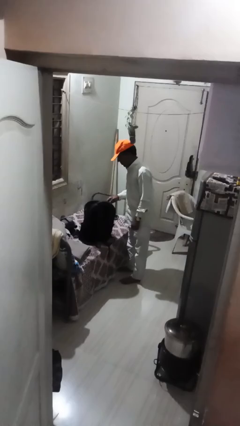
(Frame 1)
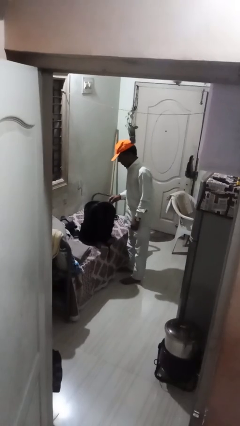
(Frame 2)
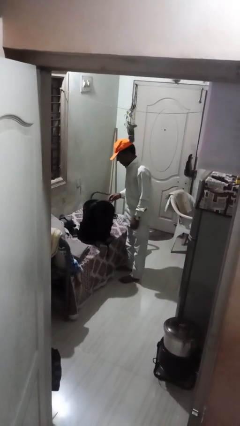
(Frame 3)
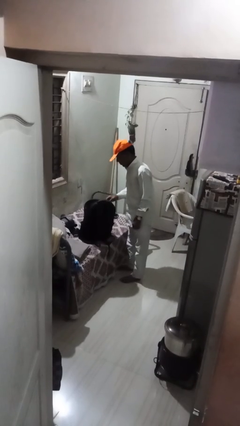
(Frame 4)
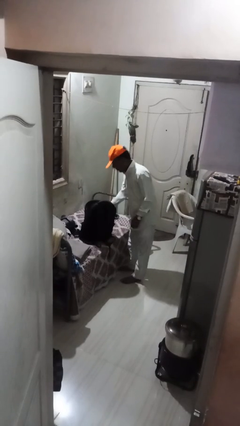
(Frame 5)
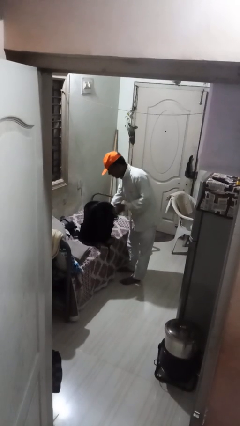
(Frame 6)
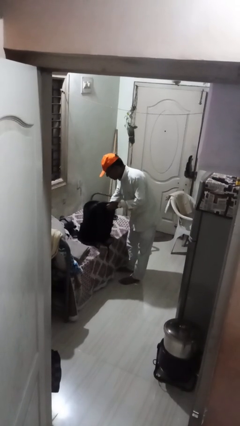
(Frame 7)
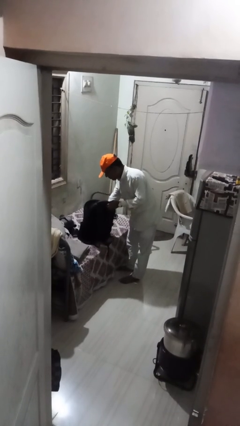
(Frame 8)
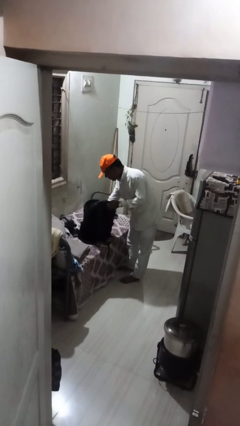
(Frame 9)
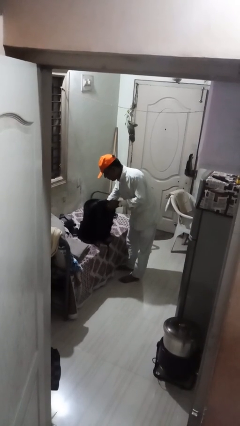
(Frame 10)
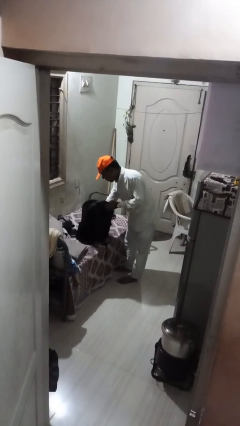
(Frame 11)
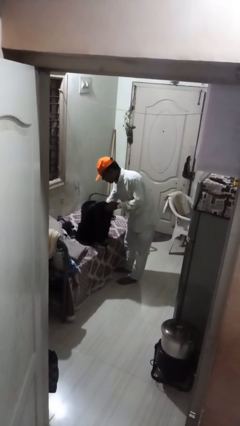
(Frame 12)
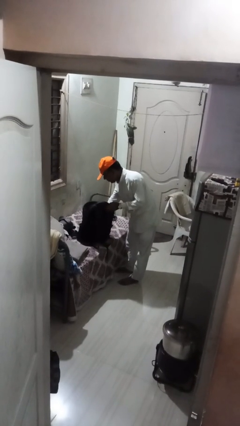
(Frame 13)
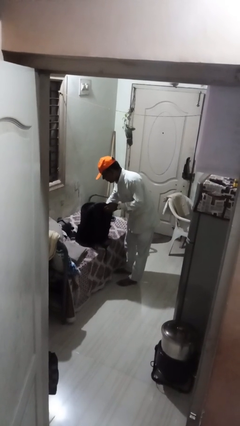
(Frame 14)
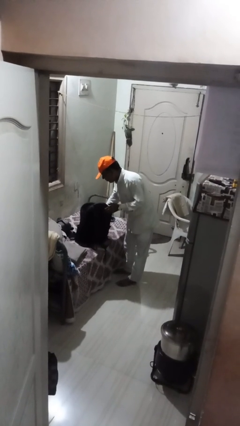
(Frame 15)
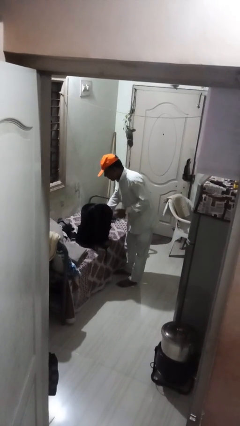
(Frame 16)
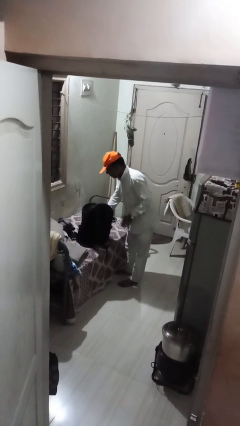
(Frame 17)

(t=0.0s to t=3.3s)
person searches in backpack

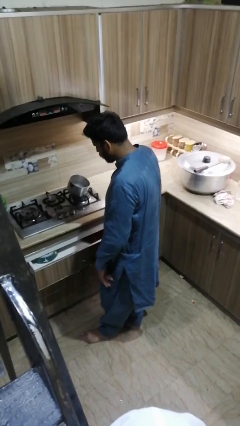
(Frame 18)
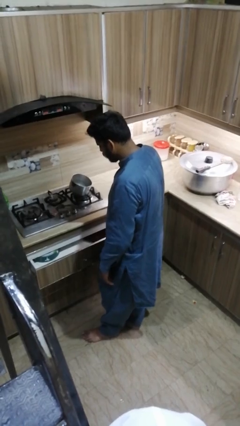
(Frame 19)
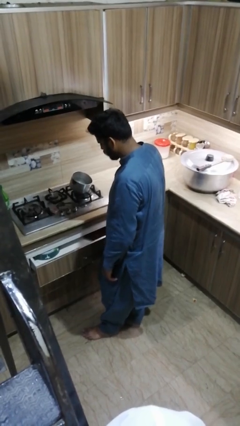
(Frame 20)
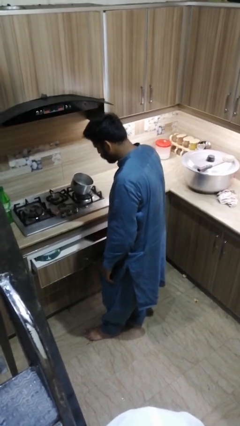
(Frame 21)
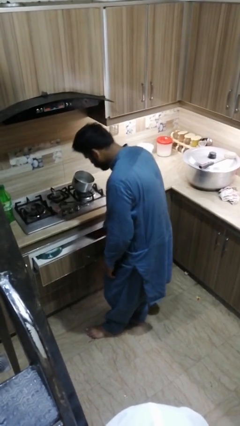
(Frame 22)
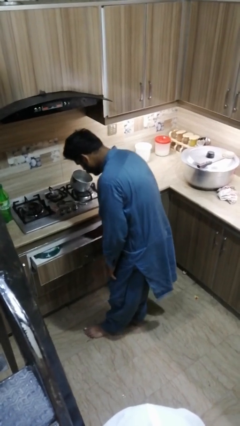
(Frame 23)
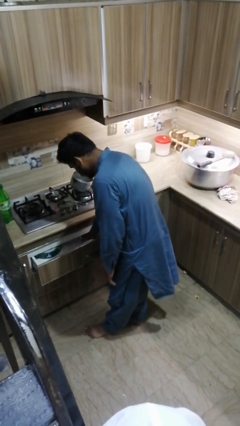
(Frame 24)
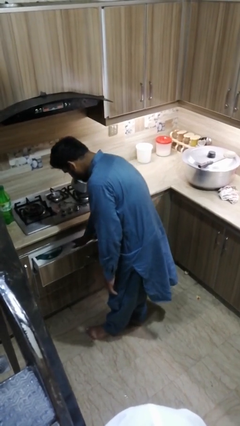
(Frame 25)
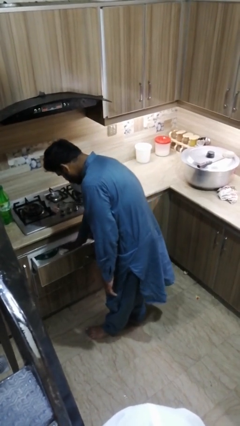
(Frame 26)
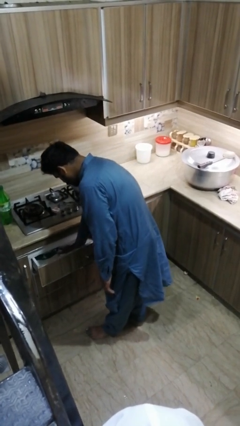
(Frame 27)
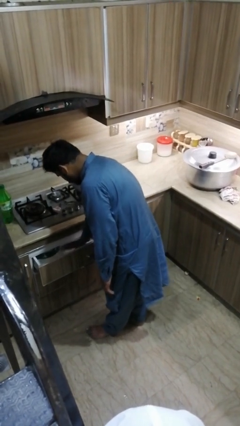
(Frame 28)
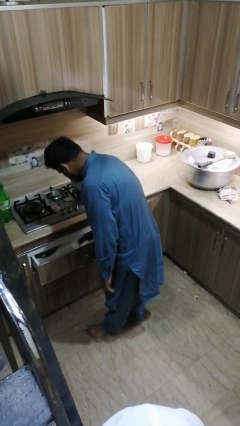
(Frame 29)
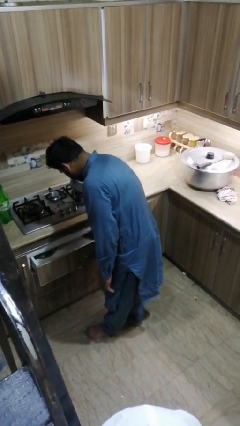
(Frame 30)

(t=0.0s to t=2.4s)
person searches in kitchen drawer

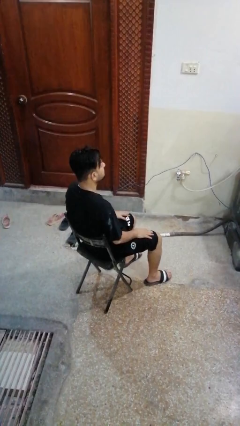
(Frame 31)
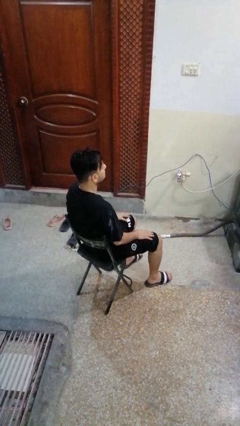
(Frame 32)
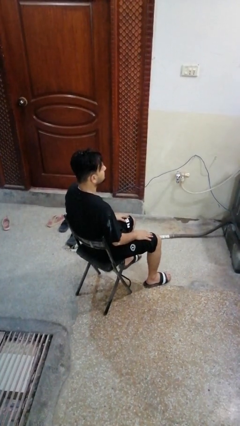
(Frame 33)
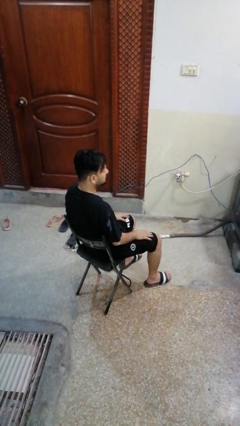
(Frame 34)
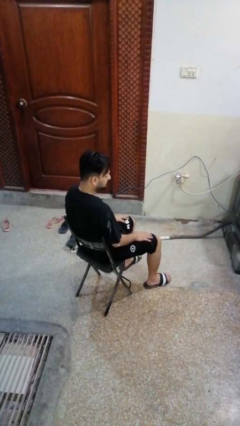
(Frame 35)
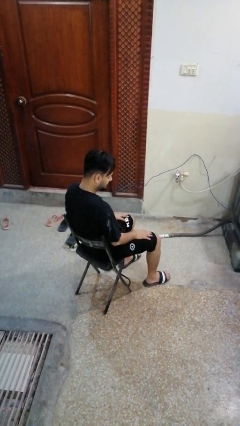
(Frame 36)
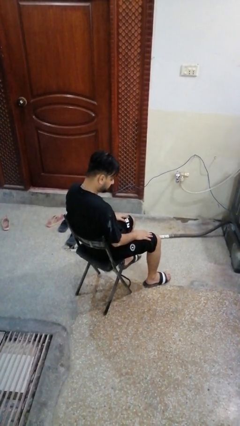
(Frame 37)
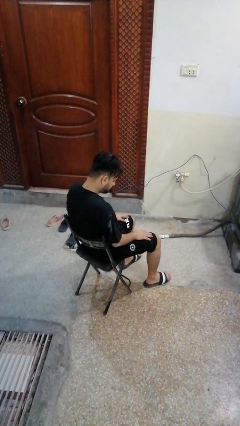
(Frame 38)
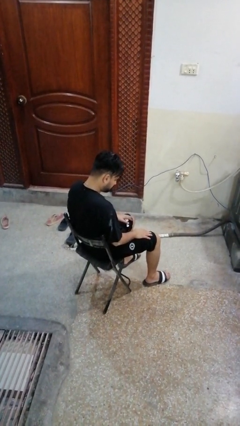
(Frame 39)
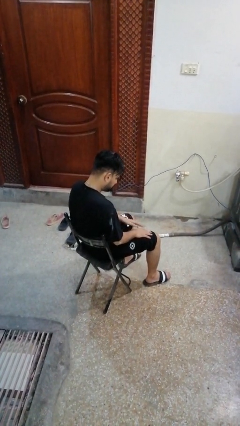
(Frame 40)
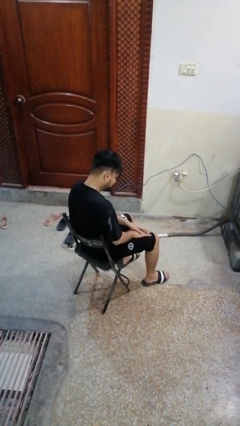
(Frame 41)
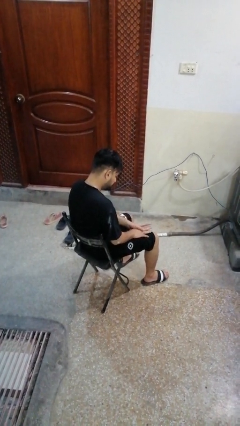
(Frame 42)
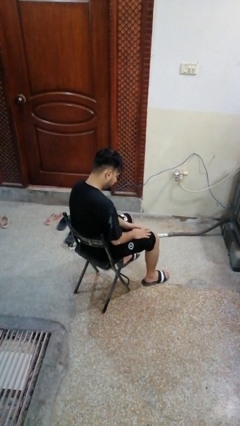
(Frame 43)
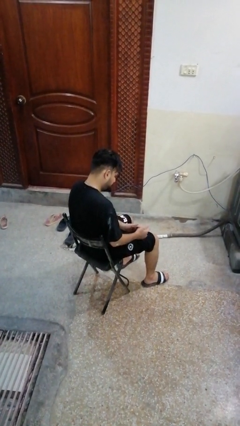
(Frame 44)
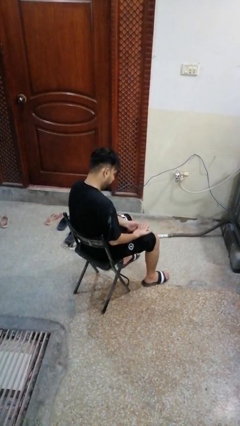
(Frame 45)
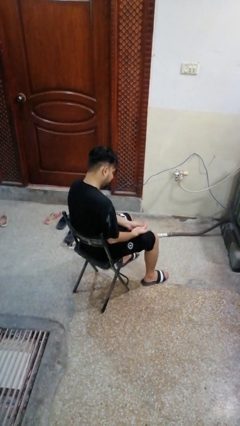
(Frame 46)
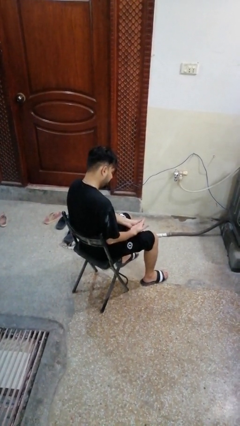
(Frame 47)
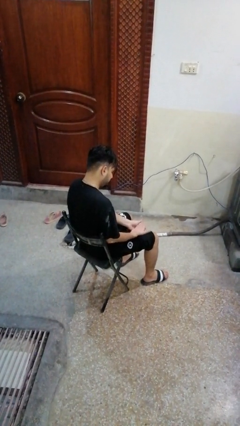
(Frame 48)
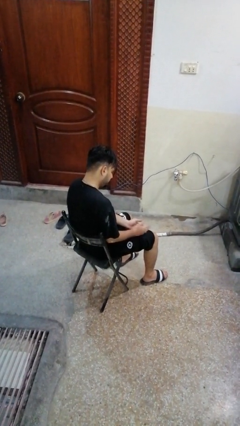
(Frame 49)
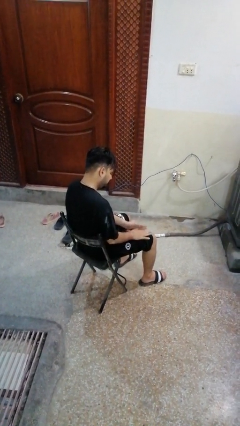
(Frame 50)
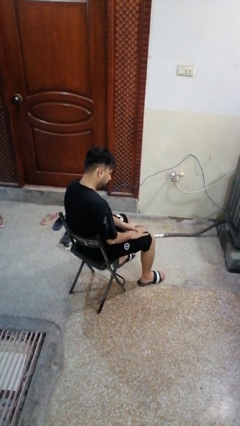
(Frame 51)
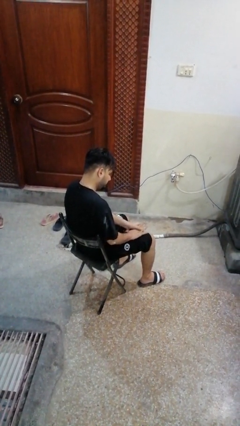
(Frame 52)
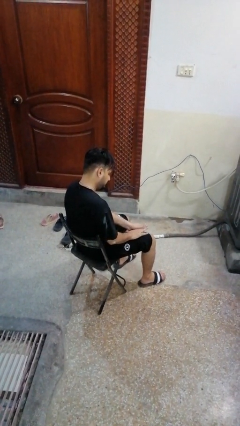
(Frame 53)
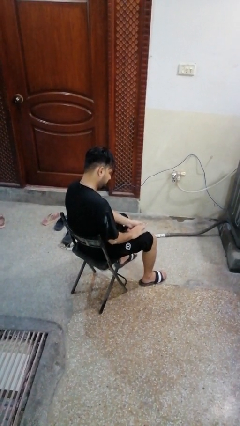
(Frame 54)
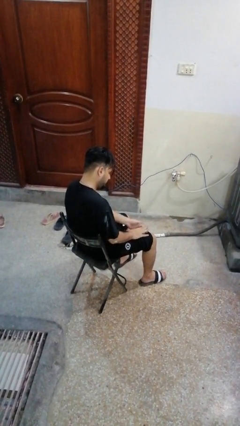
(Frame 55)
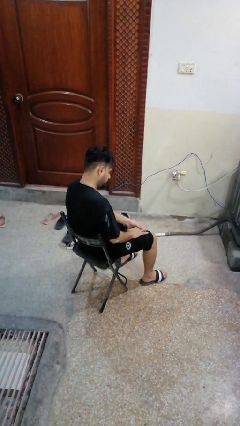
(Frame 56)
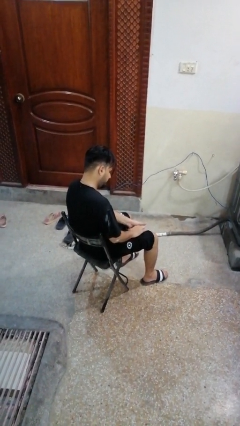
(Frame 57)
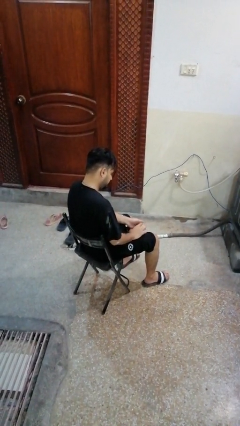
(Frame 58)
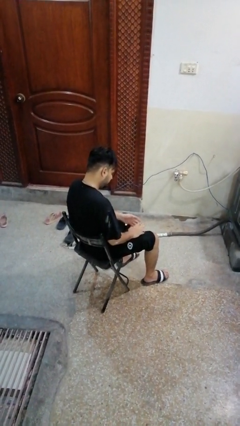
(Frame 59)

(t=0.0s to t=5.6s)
person looks at hands in lap

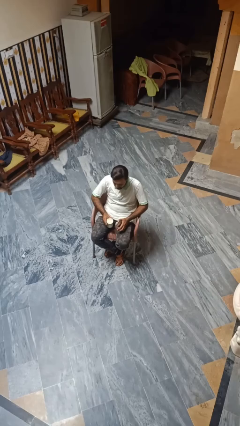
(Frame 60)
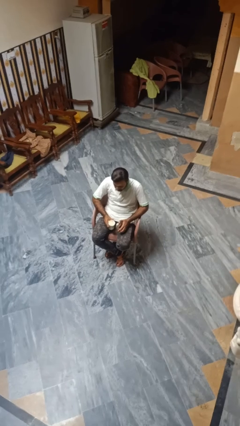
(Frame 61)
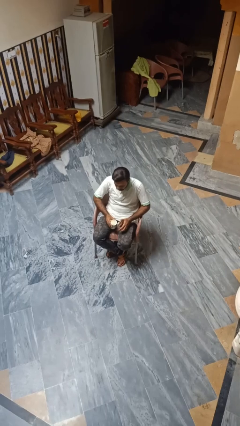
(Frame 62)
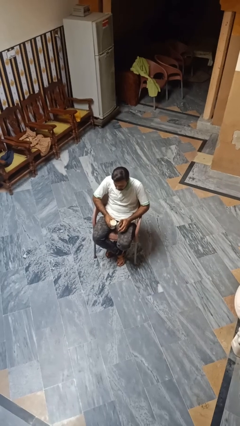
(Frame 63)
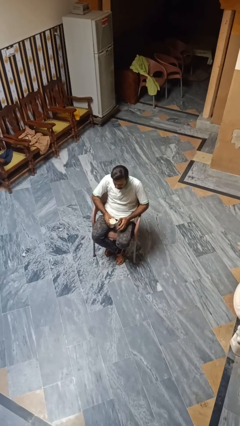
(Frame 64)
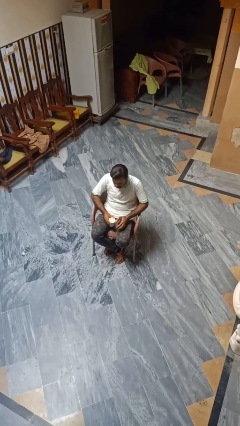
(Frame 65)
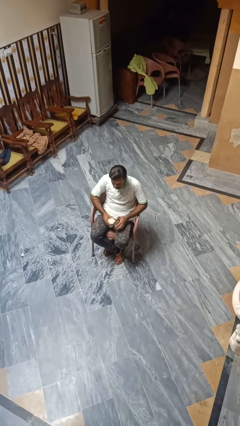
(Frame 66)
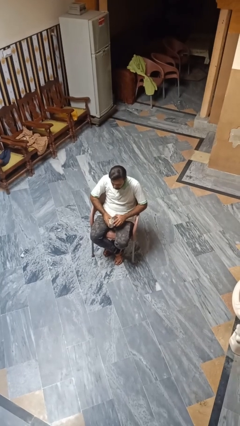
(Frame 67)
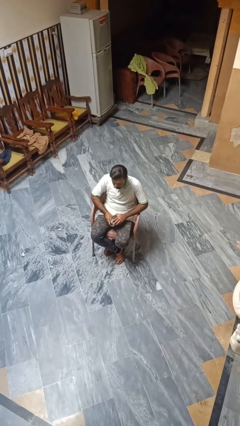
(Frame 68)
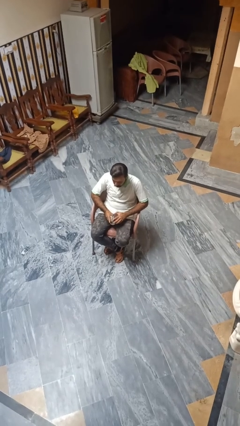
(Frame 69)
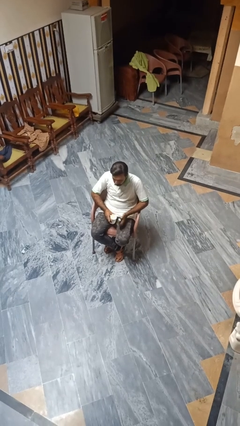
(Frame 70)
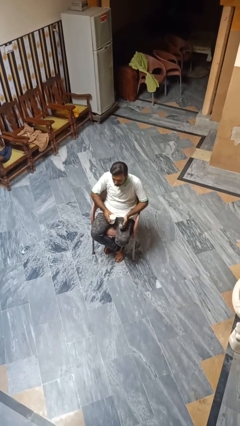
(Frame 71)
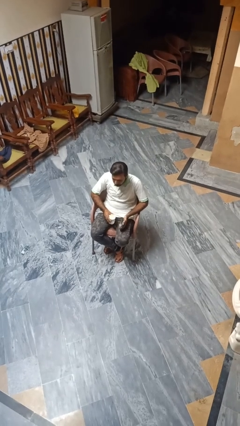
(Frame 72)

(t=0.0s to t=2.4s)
person opens beverage can

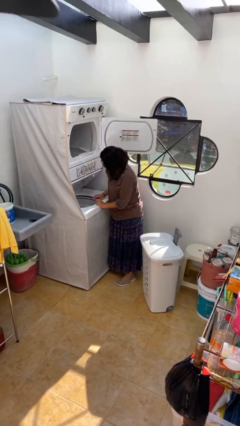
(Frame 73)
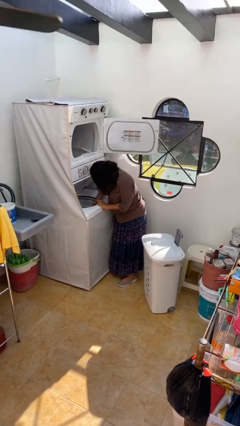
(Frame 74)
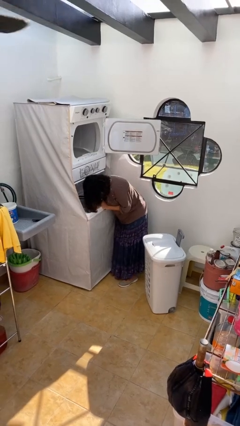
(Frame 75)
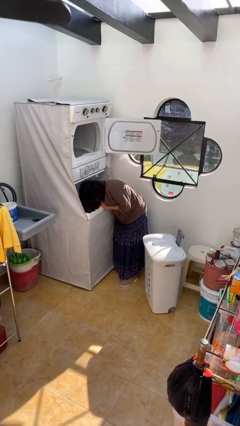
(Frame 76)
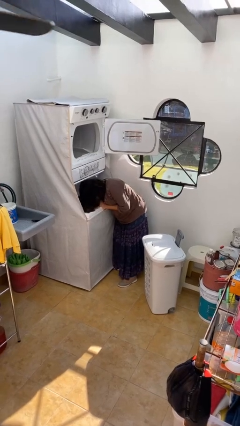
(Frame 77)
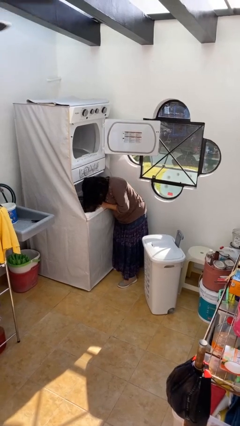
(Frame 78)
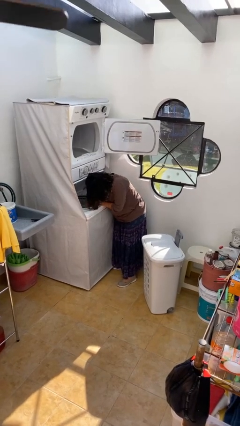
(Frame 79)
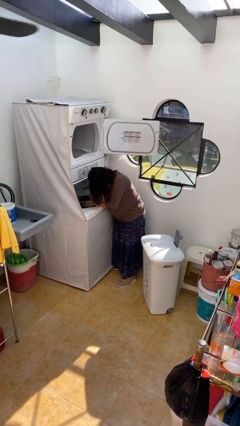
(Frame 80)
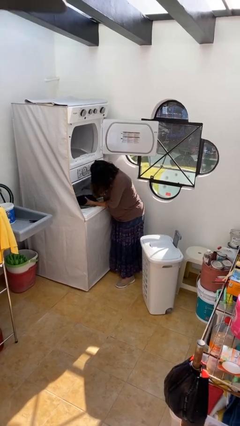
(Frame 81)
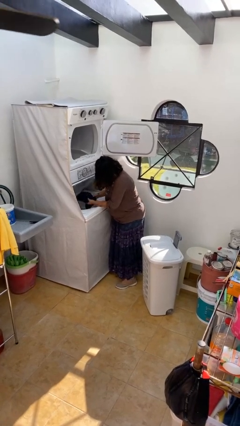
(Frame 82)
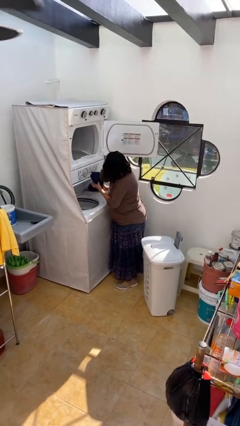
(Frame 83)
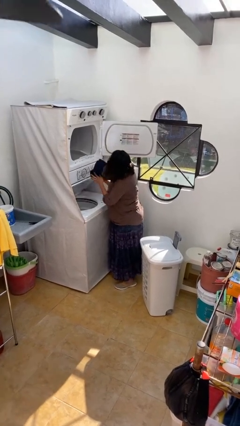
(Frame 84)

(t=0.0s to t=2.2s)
person unloads clotheswasher

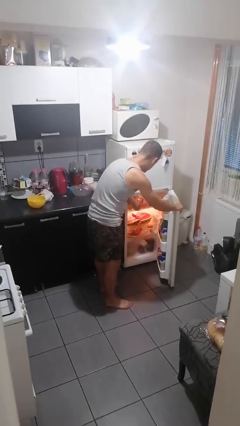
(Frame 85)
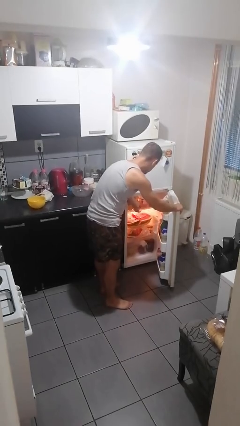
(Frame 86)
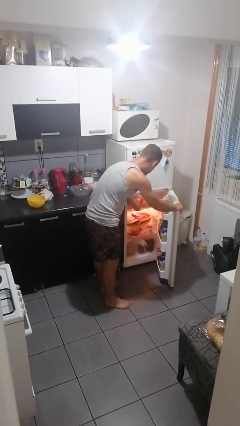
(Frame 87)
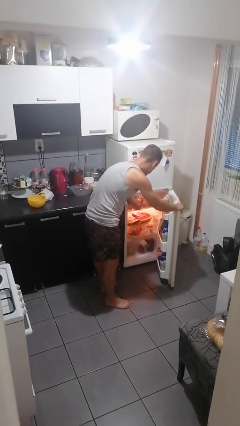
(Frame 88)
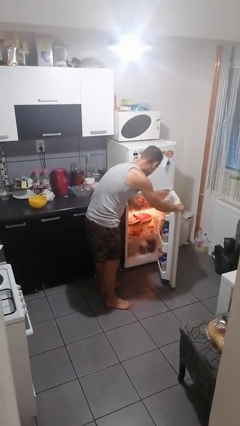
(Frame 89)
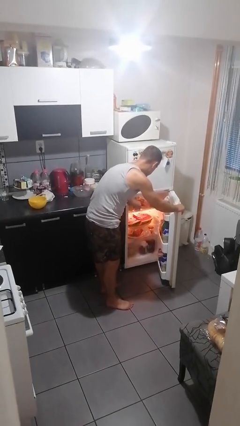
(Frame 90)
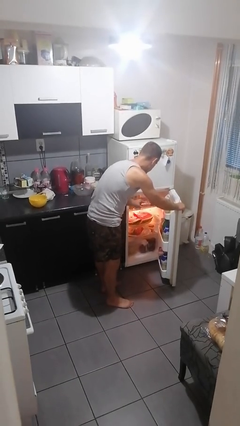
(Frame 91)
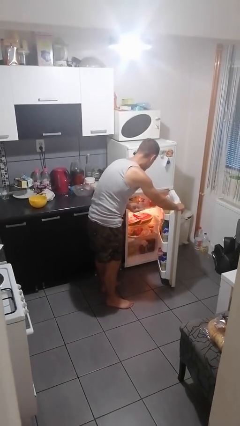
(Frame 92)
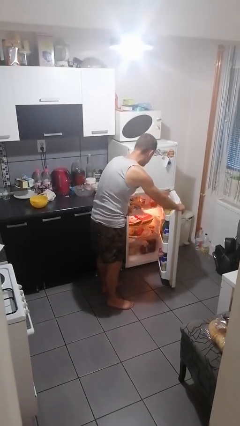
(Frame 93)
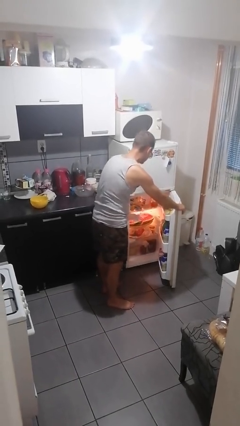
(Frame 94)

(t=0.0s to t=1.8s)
person takes object from refrigerator
